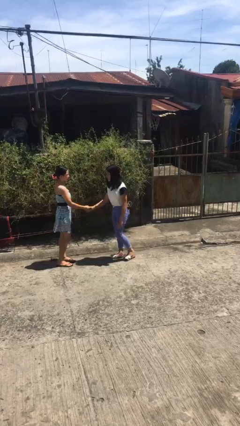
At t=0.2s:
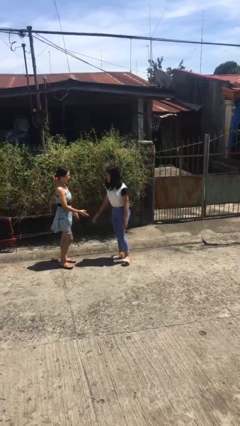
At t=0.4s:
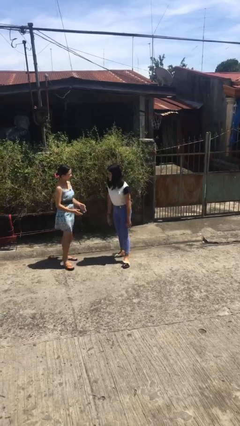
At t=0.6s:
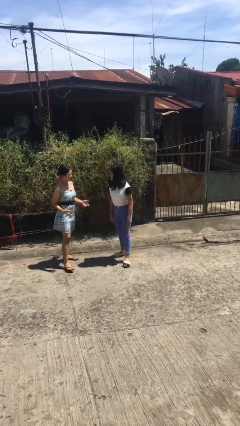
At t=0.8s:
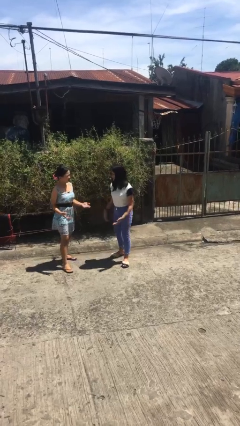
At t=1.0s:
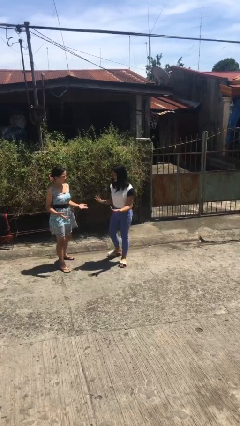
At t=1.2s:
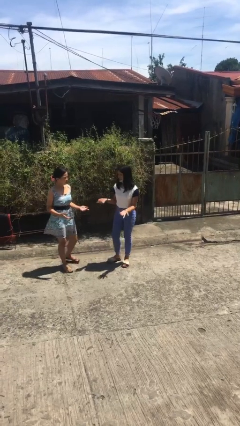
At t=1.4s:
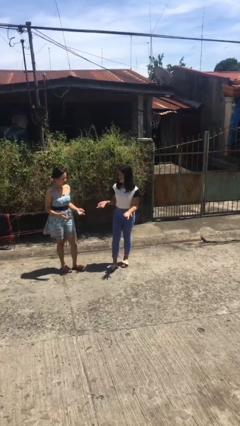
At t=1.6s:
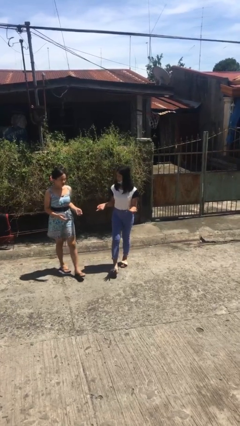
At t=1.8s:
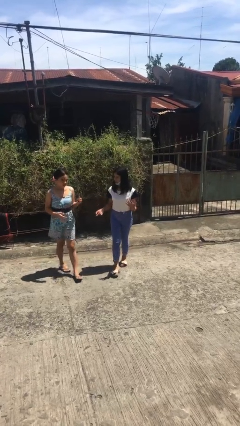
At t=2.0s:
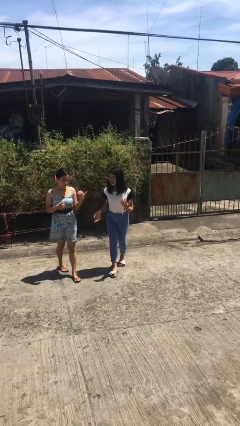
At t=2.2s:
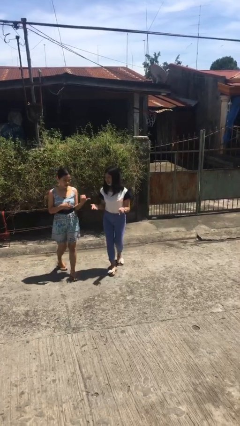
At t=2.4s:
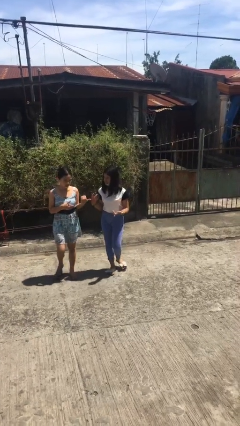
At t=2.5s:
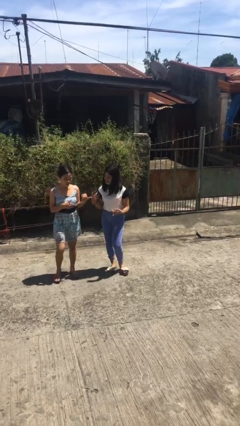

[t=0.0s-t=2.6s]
person talks to person

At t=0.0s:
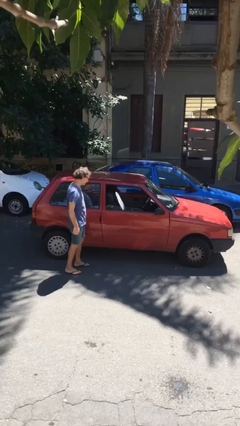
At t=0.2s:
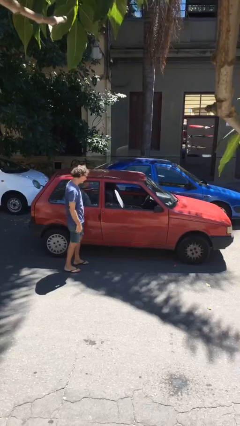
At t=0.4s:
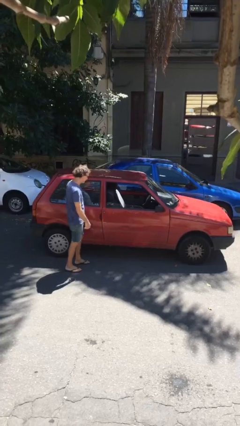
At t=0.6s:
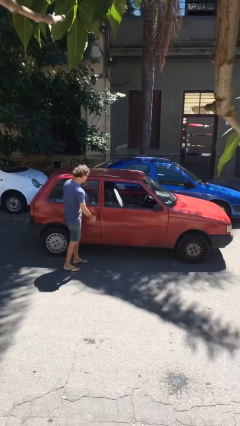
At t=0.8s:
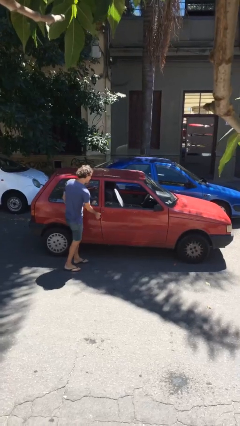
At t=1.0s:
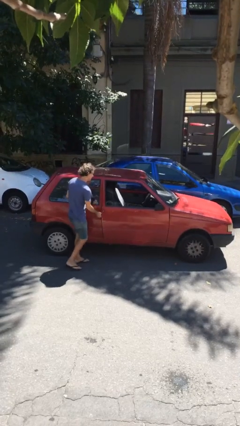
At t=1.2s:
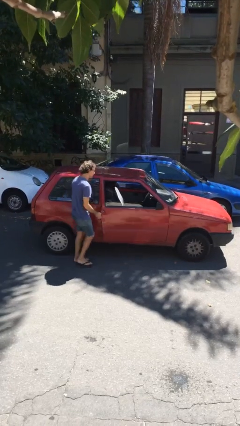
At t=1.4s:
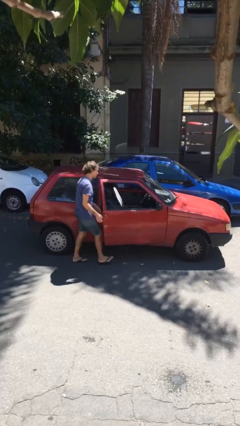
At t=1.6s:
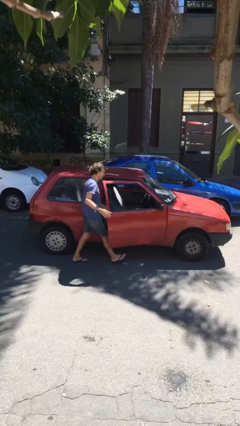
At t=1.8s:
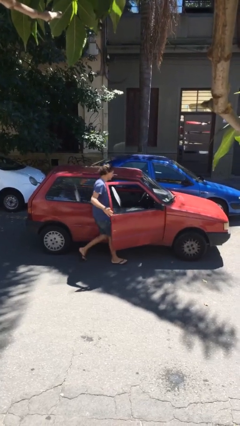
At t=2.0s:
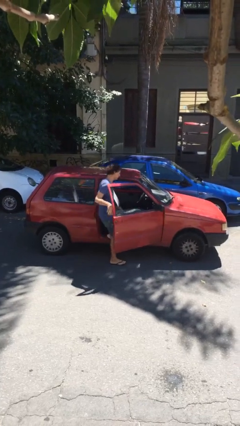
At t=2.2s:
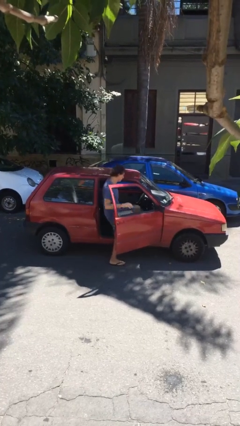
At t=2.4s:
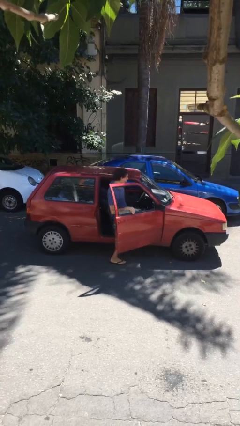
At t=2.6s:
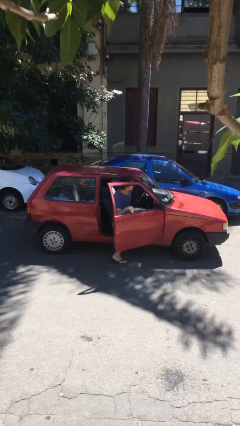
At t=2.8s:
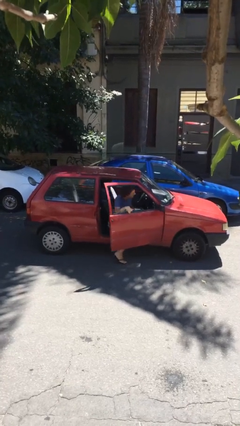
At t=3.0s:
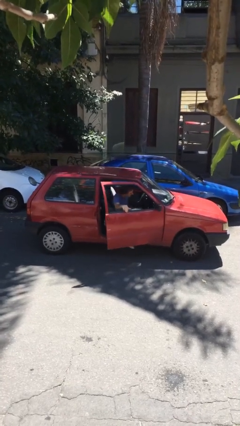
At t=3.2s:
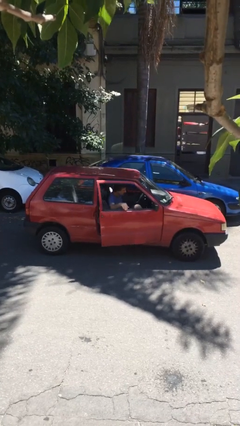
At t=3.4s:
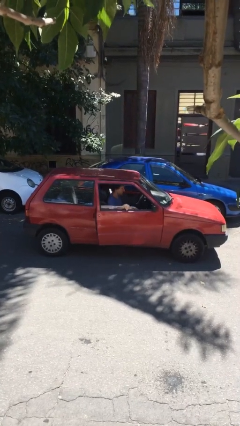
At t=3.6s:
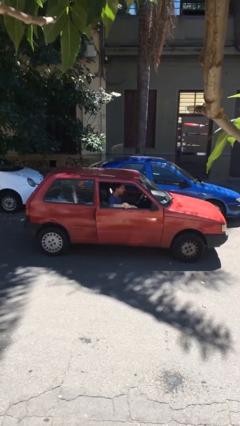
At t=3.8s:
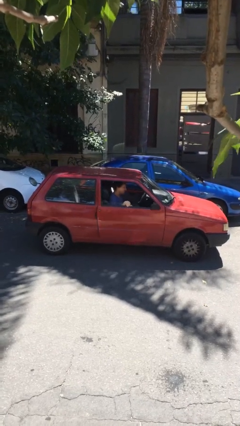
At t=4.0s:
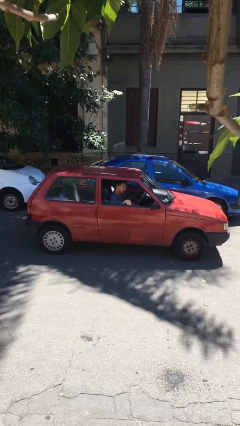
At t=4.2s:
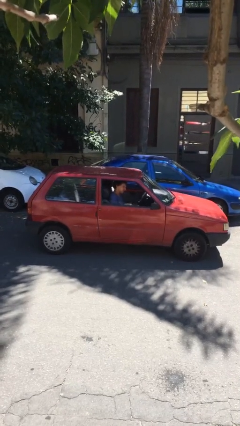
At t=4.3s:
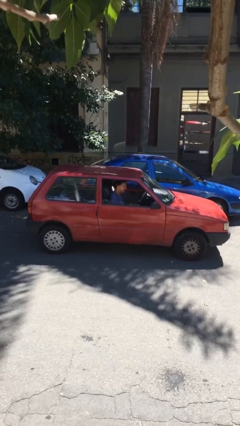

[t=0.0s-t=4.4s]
car picks up person

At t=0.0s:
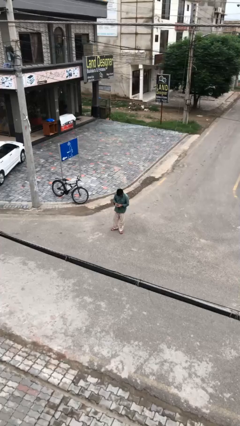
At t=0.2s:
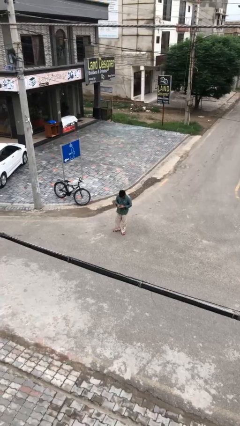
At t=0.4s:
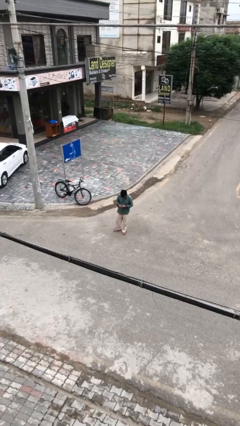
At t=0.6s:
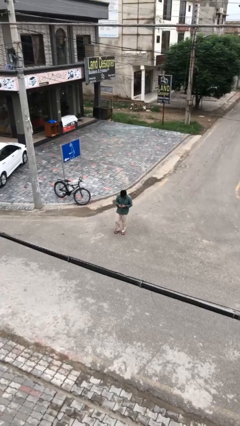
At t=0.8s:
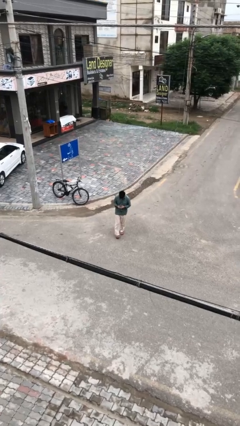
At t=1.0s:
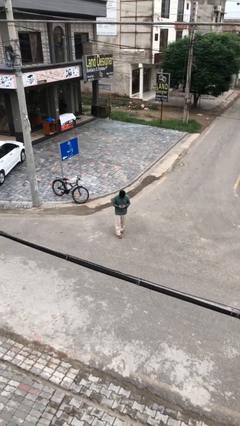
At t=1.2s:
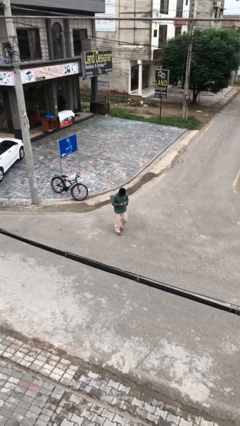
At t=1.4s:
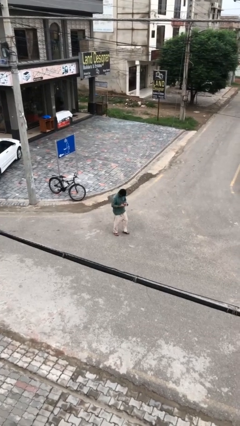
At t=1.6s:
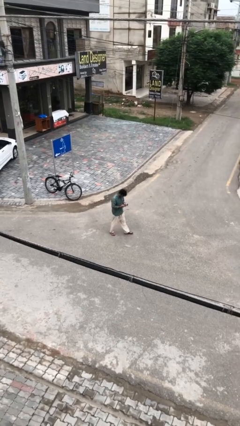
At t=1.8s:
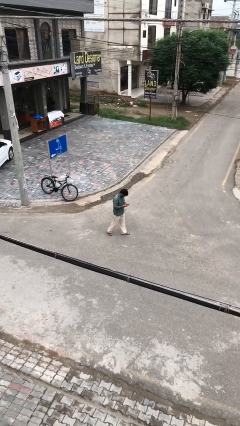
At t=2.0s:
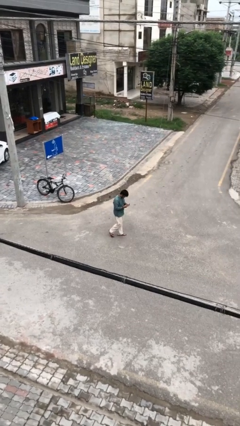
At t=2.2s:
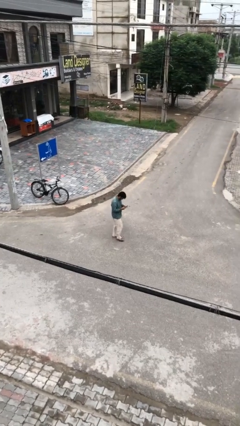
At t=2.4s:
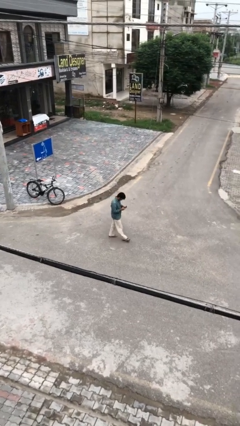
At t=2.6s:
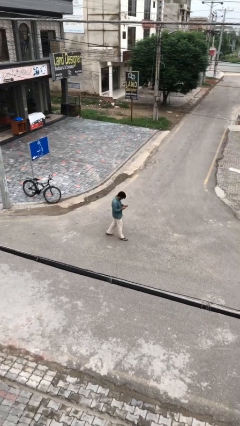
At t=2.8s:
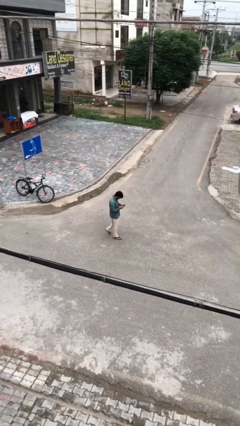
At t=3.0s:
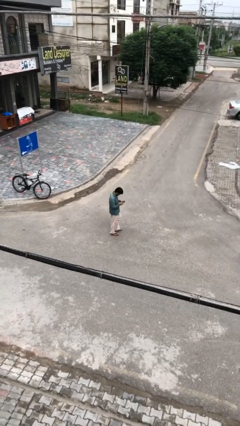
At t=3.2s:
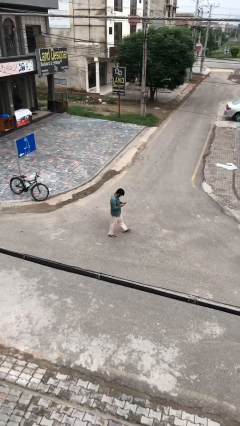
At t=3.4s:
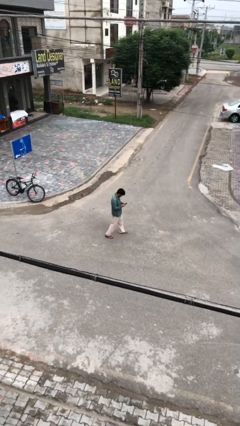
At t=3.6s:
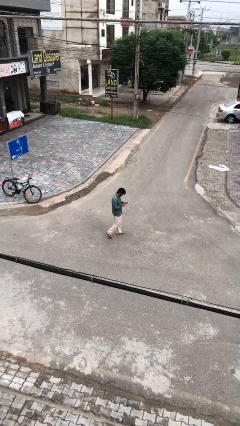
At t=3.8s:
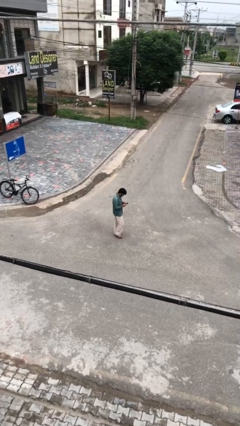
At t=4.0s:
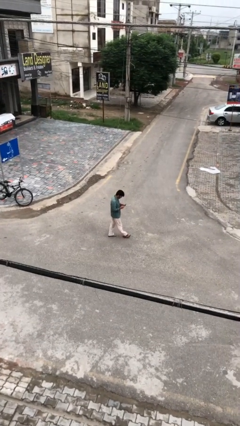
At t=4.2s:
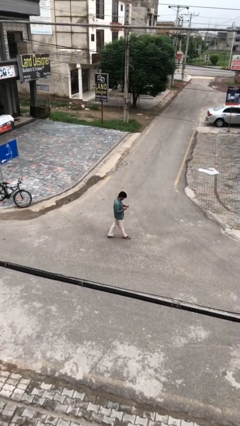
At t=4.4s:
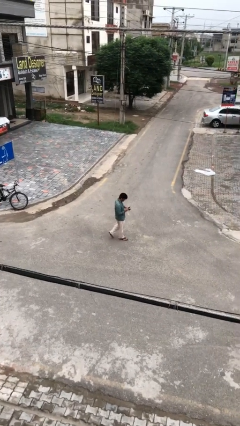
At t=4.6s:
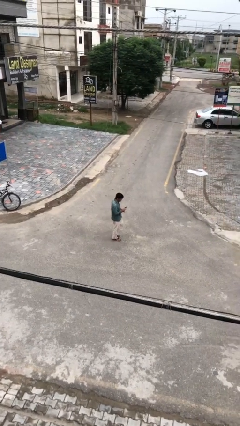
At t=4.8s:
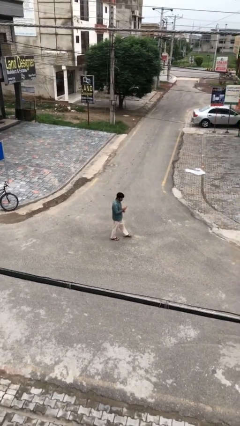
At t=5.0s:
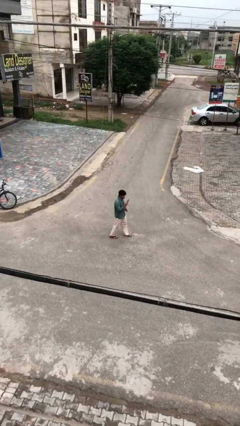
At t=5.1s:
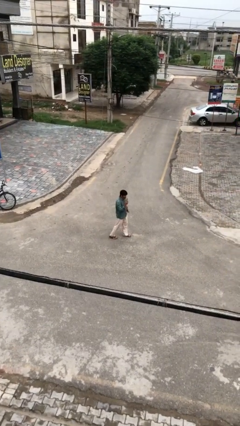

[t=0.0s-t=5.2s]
person texts on phone

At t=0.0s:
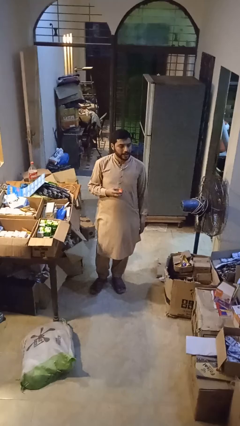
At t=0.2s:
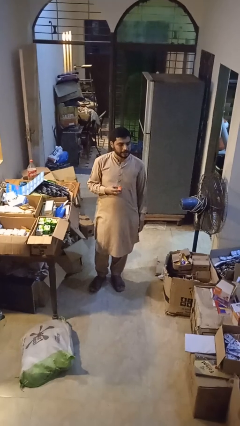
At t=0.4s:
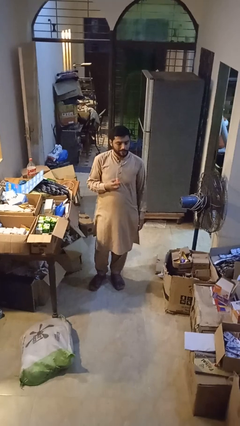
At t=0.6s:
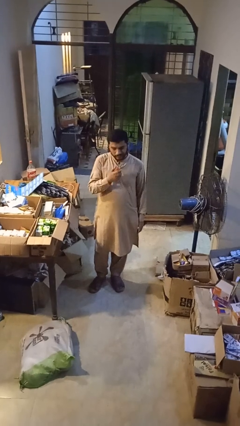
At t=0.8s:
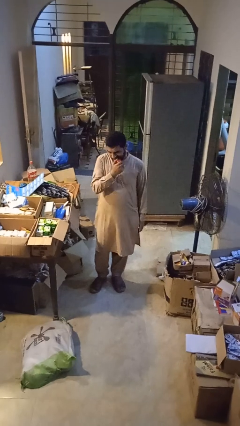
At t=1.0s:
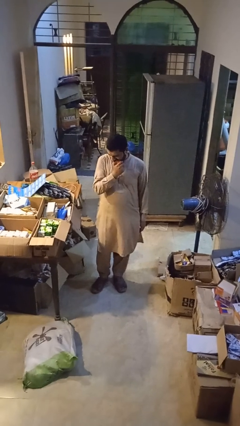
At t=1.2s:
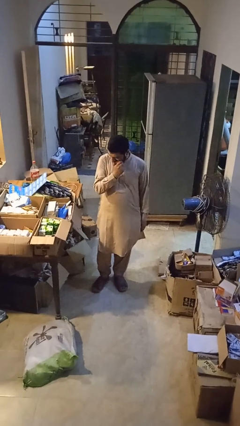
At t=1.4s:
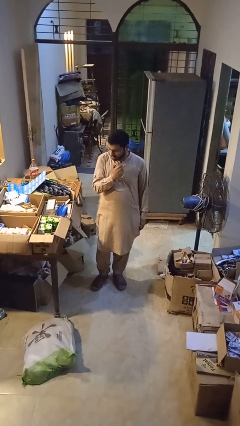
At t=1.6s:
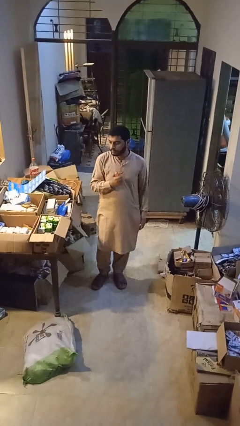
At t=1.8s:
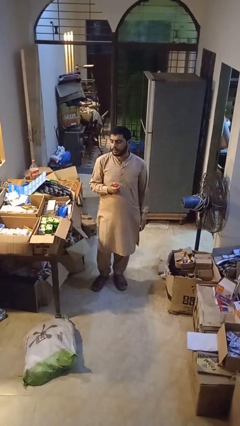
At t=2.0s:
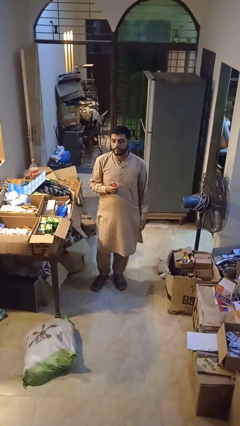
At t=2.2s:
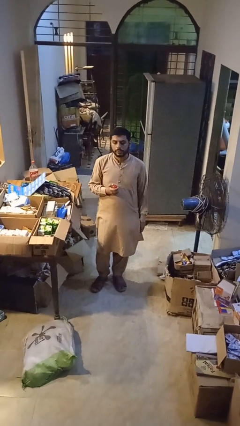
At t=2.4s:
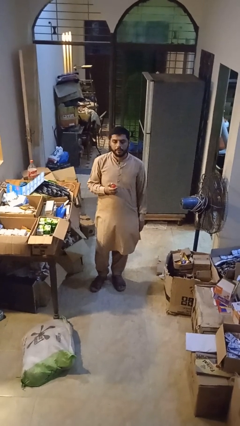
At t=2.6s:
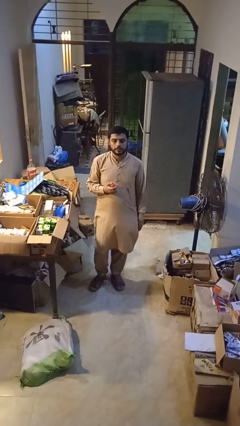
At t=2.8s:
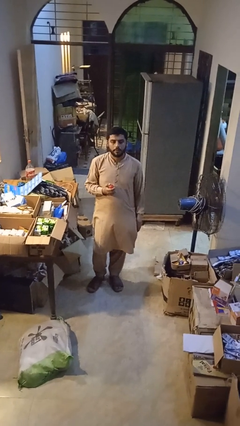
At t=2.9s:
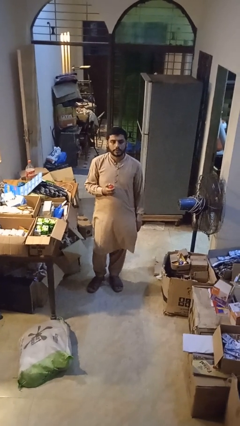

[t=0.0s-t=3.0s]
person eats apple

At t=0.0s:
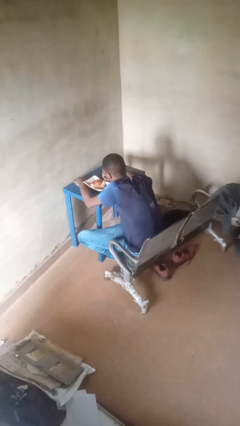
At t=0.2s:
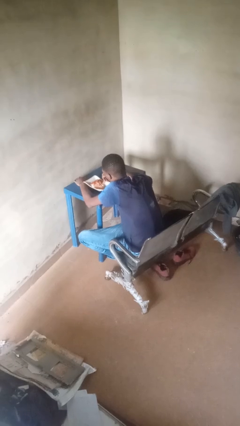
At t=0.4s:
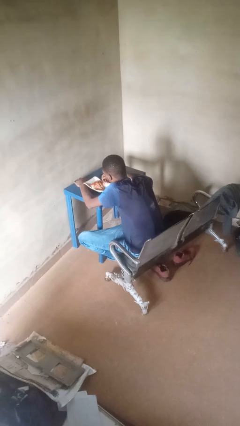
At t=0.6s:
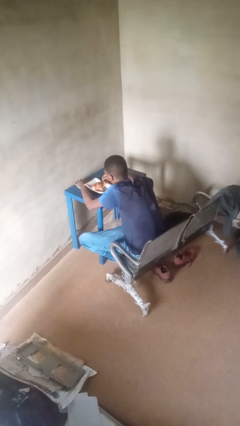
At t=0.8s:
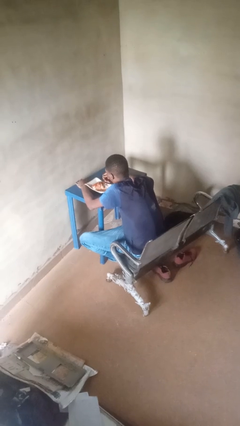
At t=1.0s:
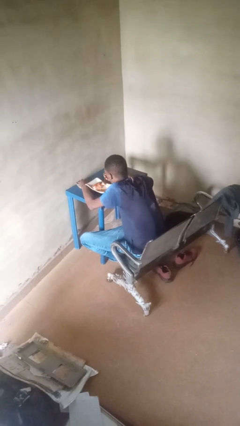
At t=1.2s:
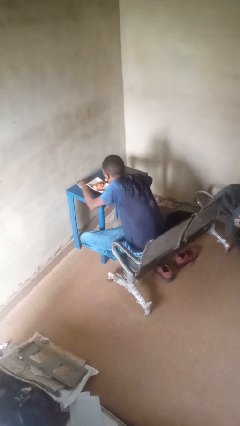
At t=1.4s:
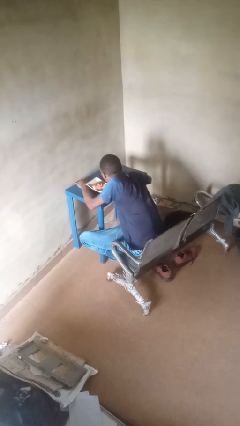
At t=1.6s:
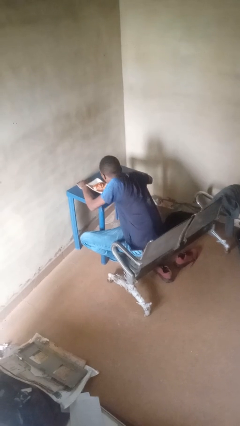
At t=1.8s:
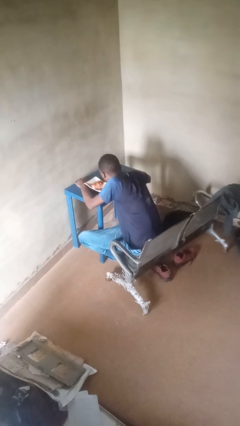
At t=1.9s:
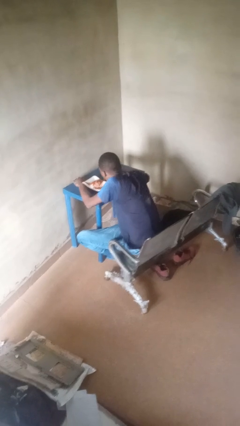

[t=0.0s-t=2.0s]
person eats with utensil

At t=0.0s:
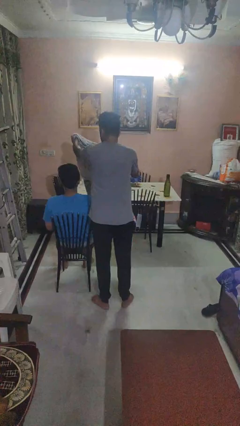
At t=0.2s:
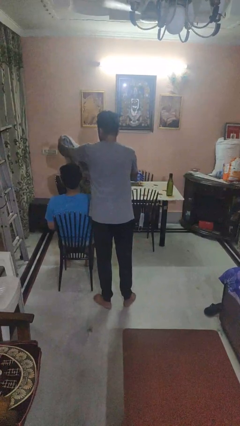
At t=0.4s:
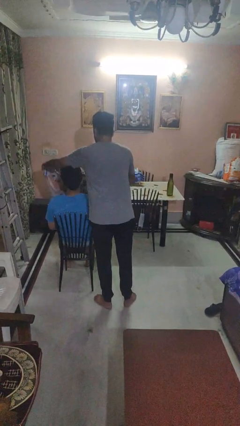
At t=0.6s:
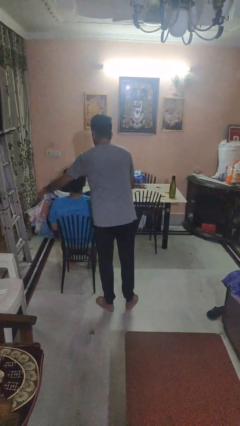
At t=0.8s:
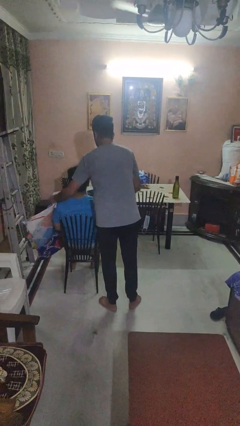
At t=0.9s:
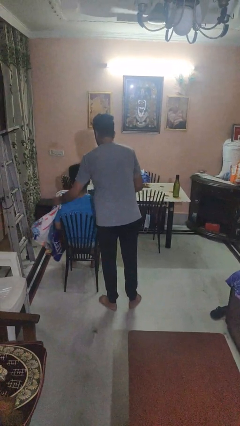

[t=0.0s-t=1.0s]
person covers friend with blanket
